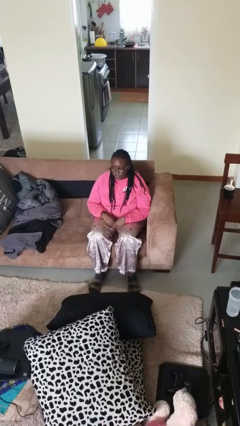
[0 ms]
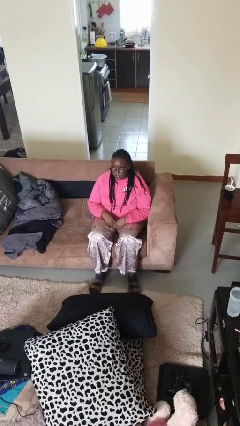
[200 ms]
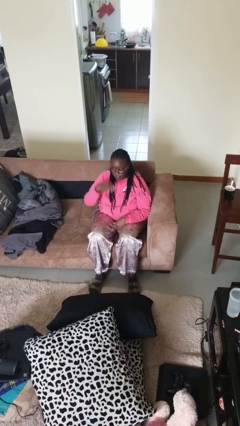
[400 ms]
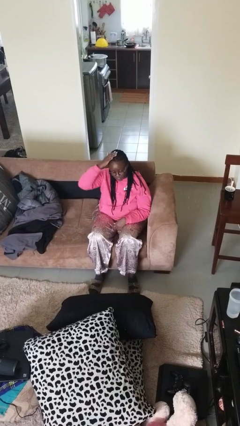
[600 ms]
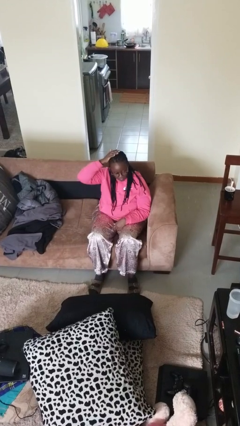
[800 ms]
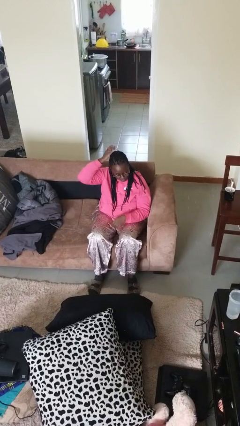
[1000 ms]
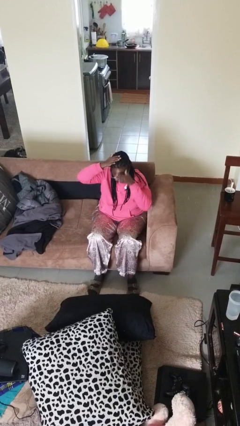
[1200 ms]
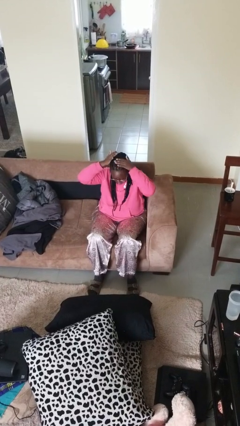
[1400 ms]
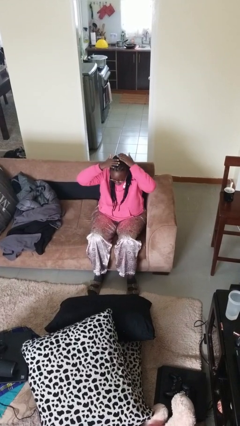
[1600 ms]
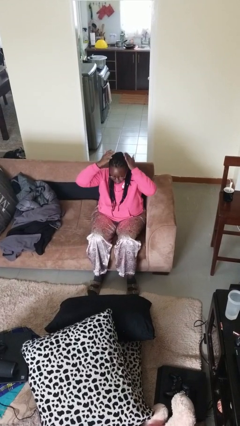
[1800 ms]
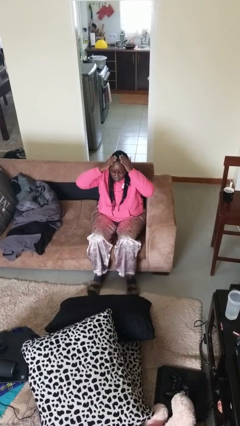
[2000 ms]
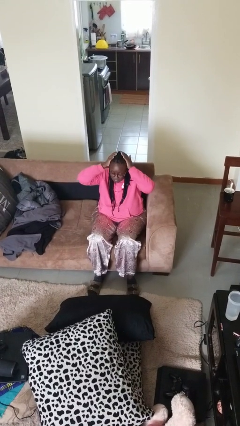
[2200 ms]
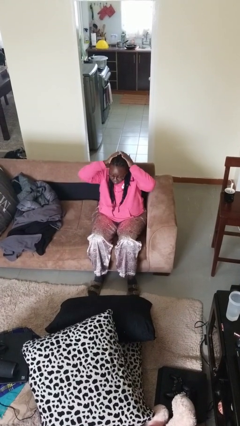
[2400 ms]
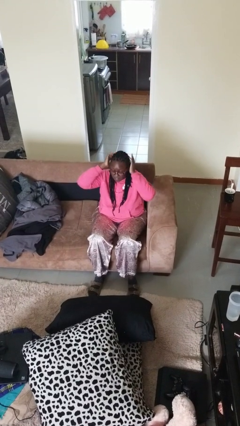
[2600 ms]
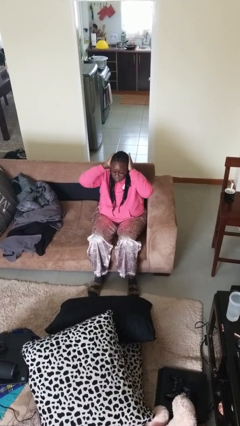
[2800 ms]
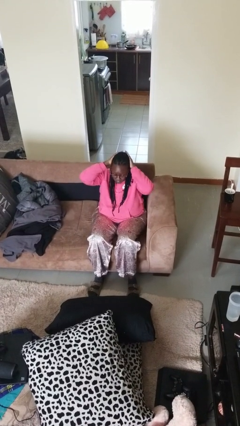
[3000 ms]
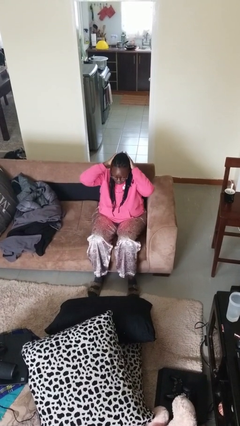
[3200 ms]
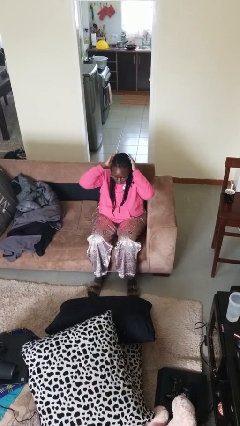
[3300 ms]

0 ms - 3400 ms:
person strokes hair

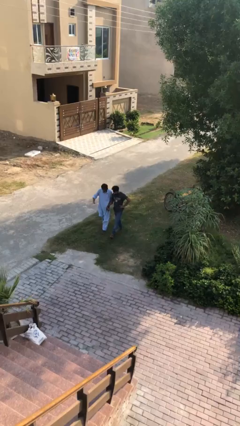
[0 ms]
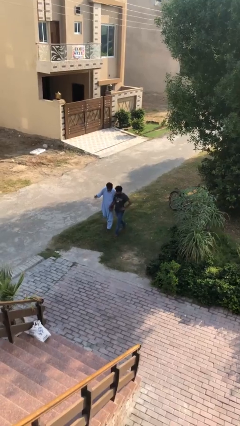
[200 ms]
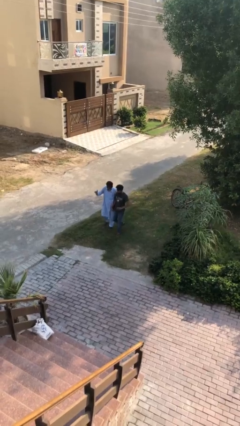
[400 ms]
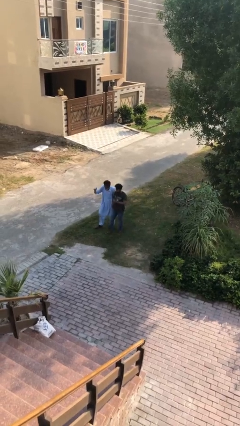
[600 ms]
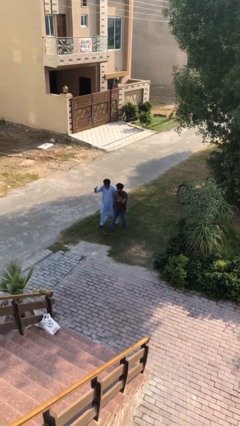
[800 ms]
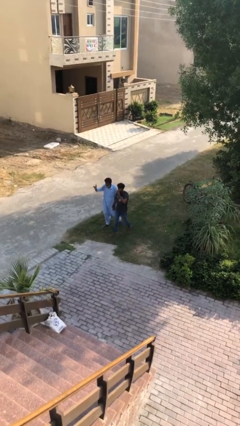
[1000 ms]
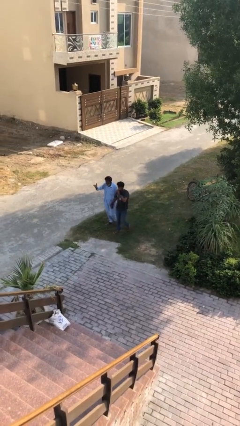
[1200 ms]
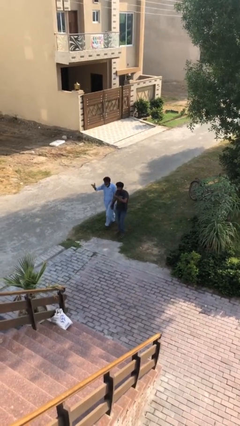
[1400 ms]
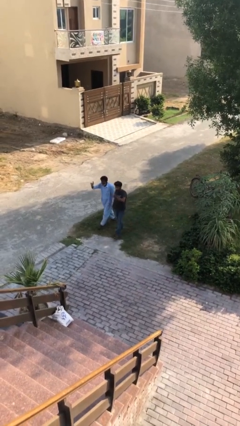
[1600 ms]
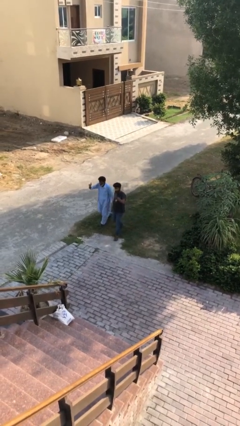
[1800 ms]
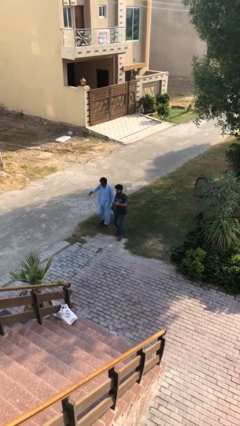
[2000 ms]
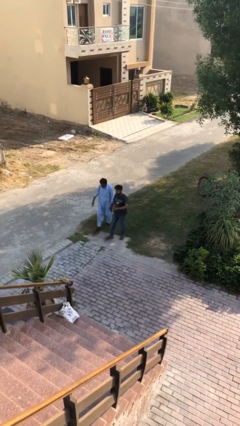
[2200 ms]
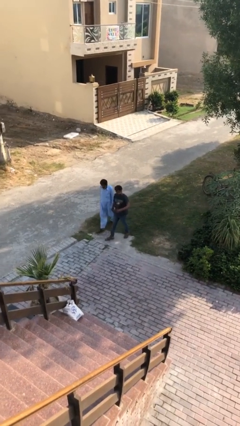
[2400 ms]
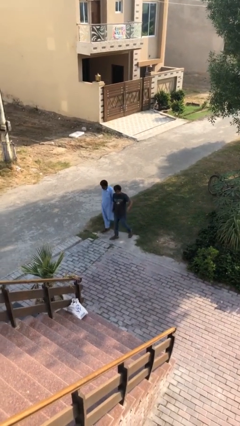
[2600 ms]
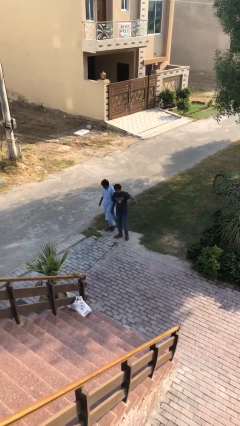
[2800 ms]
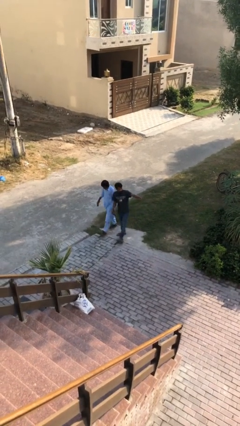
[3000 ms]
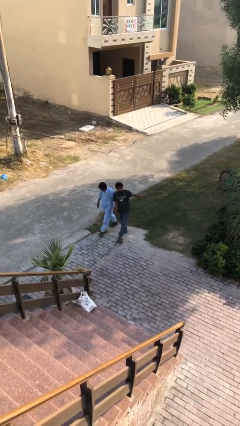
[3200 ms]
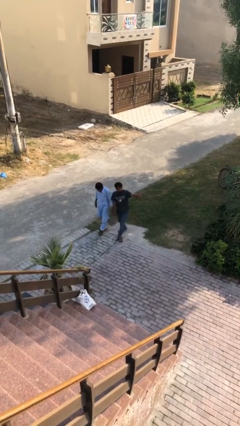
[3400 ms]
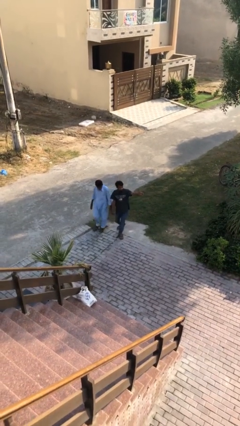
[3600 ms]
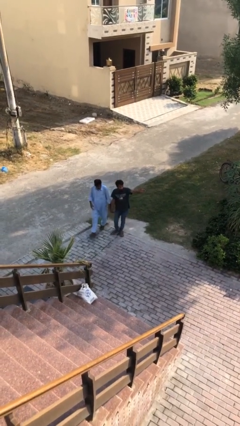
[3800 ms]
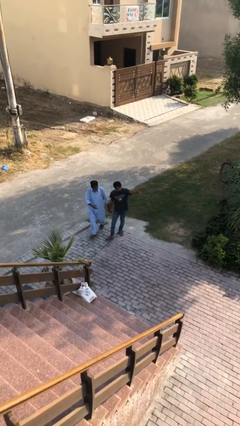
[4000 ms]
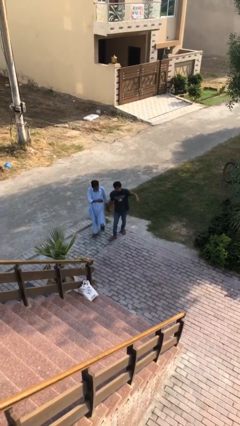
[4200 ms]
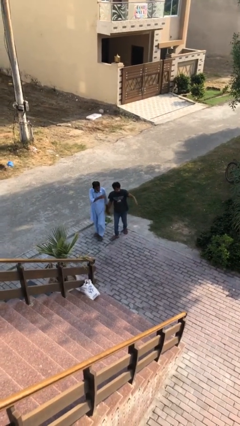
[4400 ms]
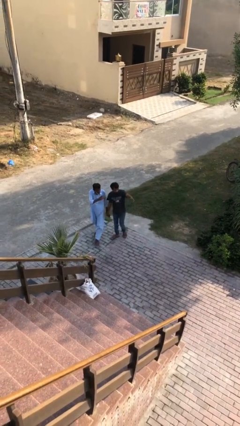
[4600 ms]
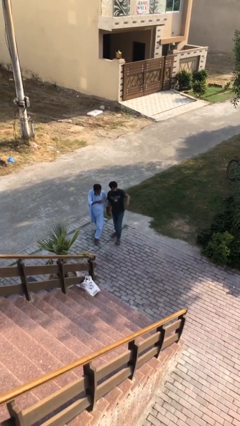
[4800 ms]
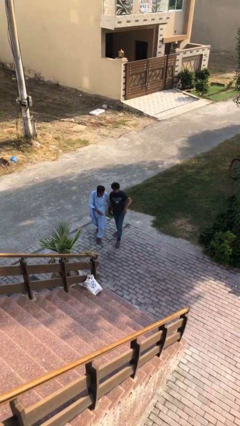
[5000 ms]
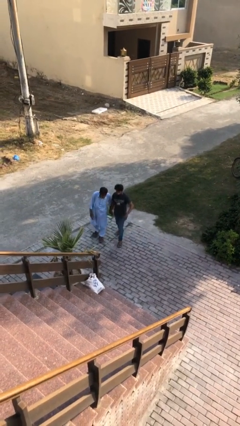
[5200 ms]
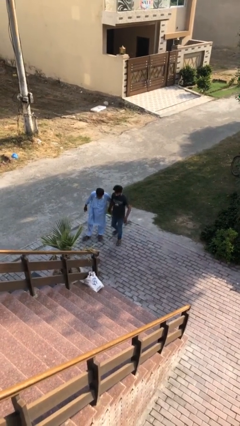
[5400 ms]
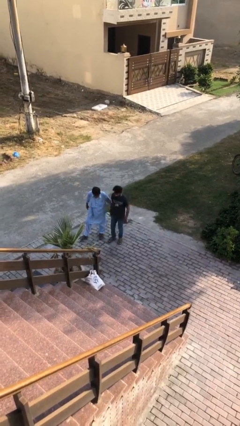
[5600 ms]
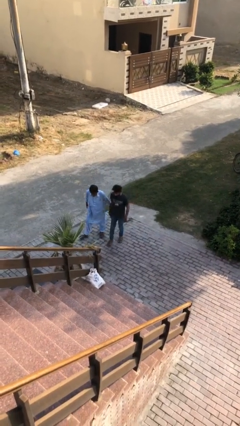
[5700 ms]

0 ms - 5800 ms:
person holds hand

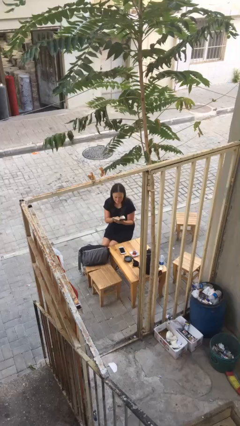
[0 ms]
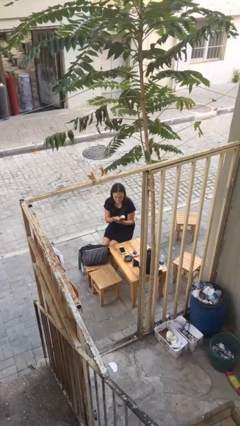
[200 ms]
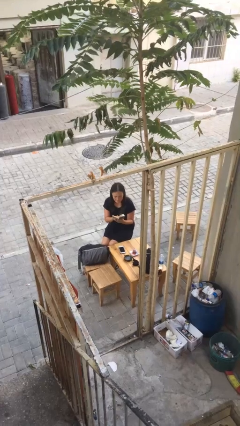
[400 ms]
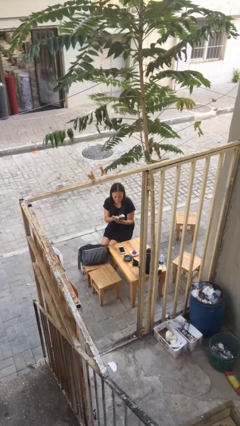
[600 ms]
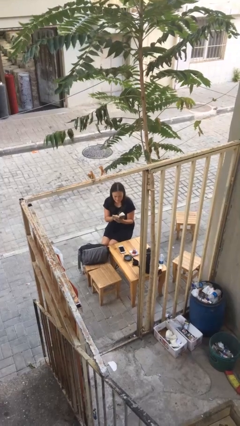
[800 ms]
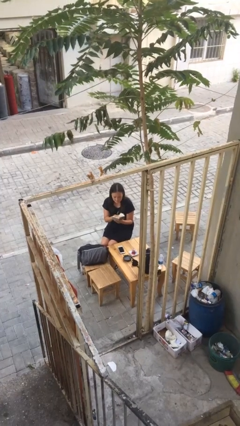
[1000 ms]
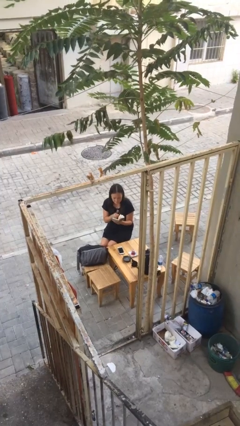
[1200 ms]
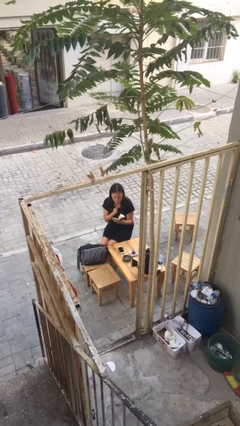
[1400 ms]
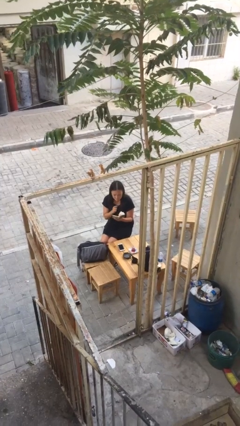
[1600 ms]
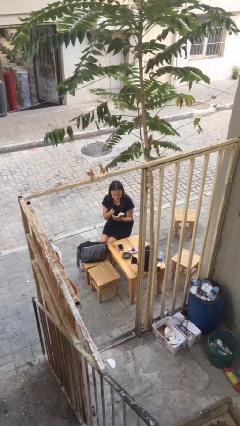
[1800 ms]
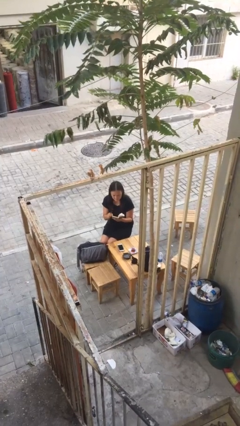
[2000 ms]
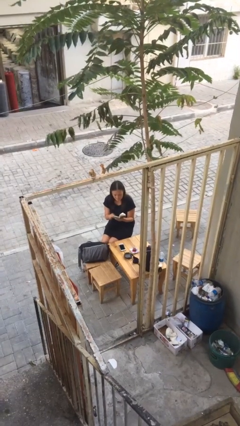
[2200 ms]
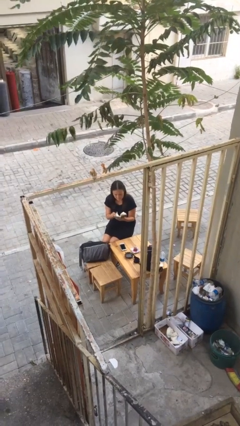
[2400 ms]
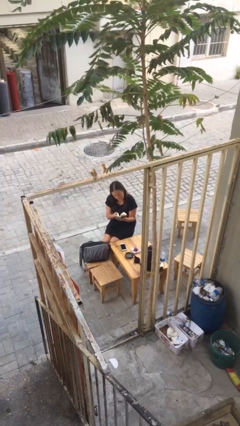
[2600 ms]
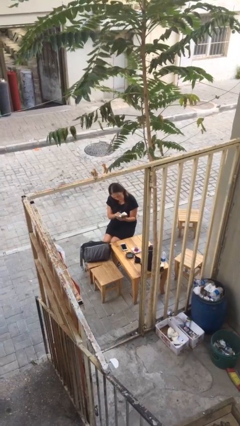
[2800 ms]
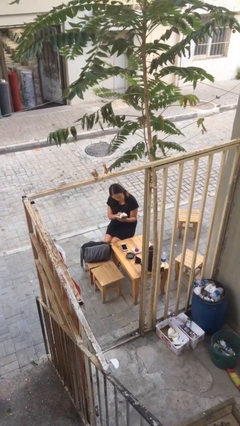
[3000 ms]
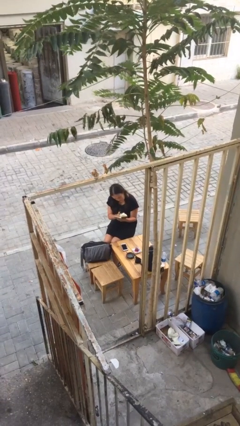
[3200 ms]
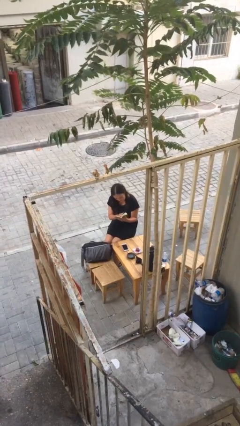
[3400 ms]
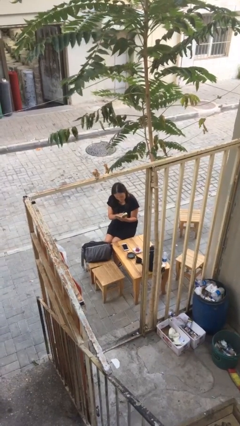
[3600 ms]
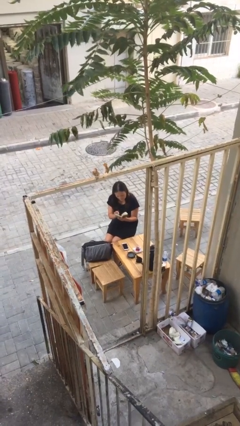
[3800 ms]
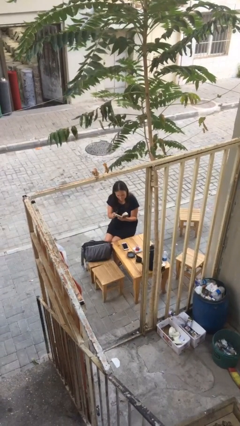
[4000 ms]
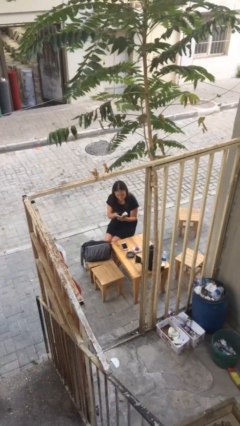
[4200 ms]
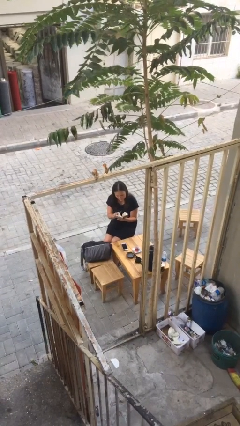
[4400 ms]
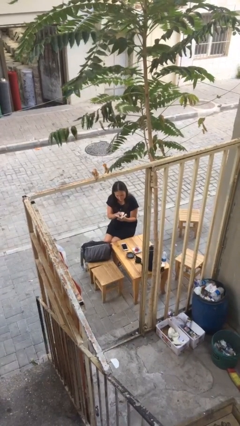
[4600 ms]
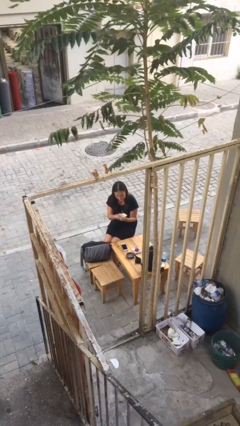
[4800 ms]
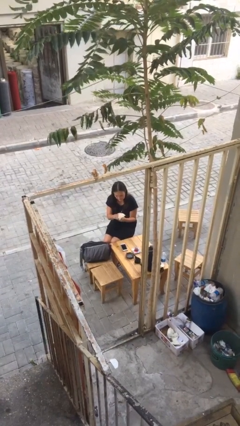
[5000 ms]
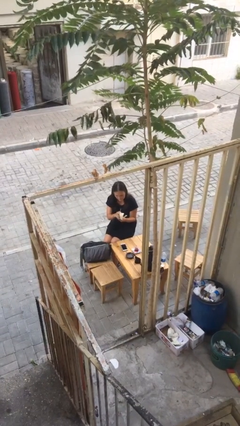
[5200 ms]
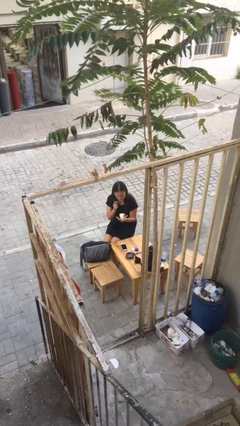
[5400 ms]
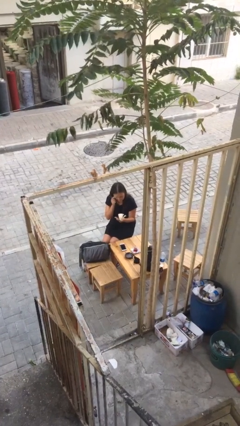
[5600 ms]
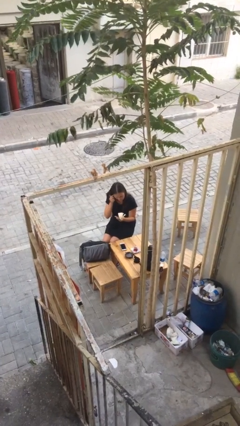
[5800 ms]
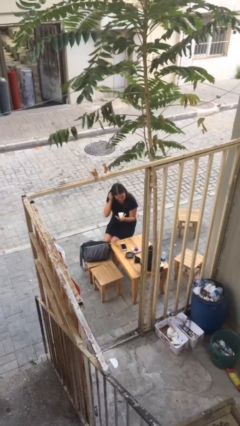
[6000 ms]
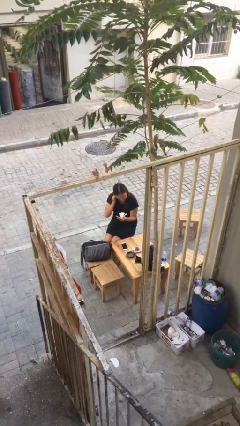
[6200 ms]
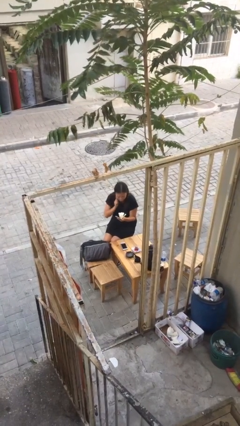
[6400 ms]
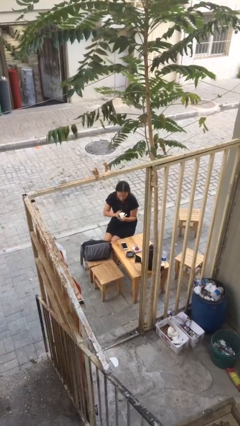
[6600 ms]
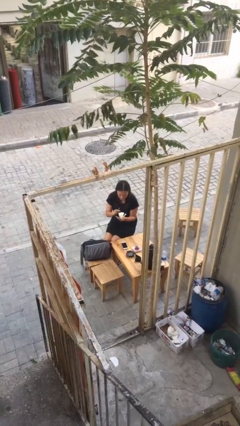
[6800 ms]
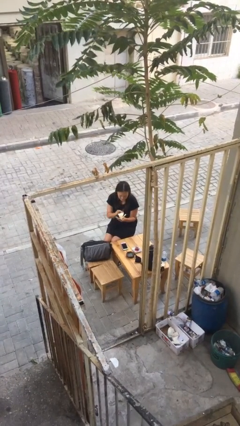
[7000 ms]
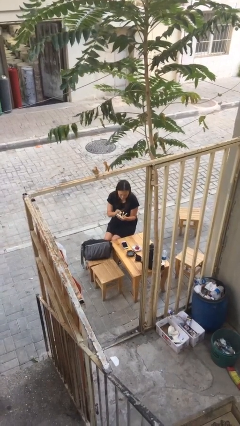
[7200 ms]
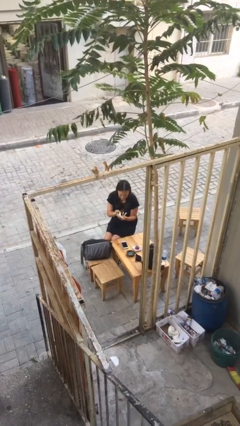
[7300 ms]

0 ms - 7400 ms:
person reads document

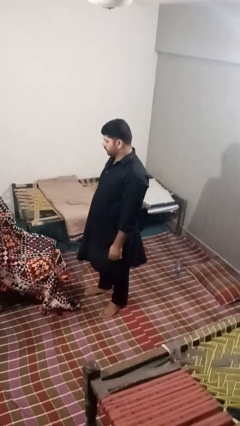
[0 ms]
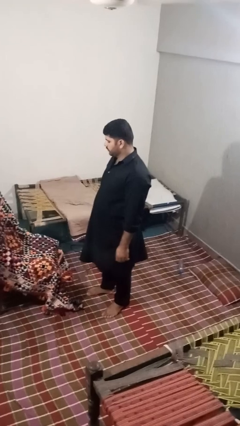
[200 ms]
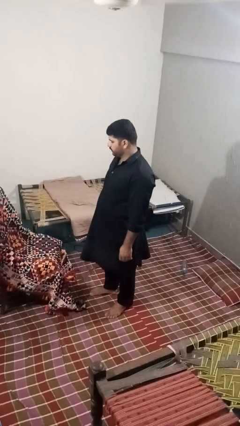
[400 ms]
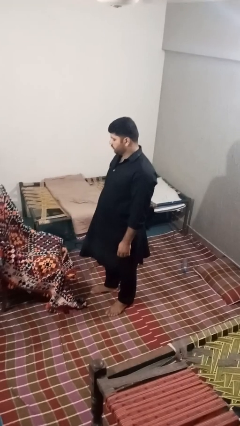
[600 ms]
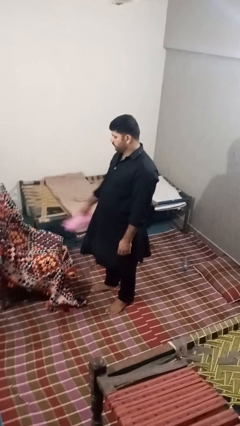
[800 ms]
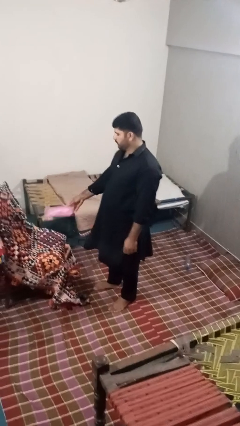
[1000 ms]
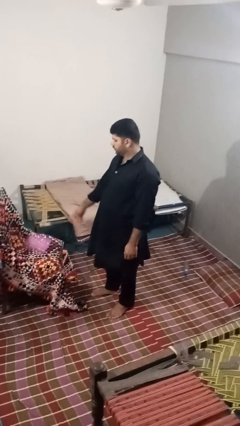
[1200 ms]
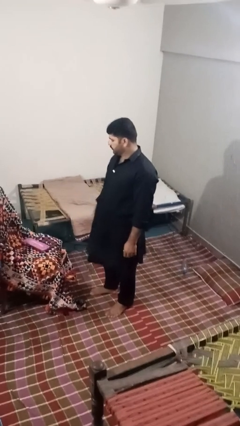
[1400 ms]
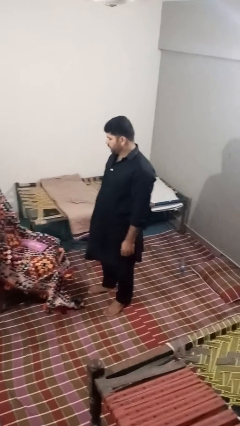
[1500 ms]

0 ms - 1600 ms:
person puts down object on couch
